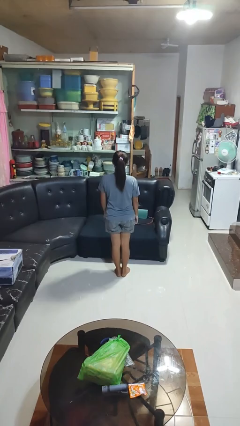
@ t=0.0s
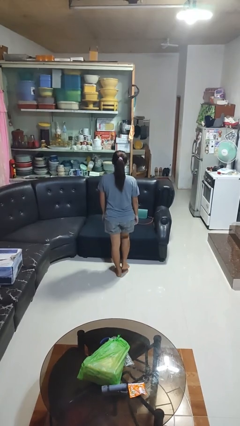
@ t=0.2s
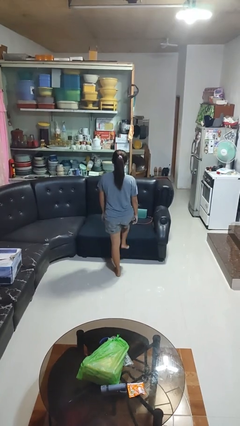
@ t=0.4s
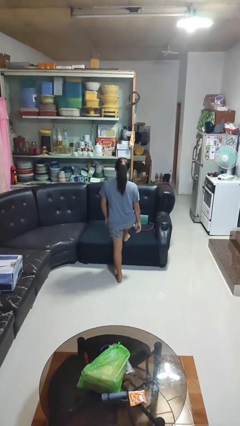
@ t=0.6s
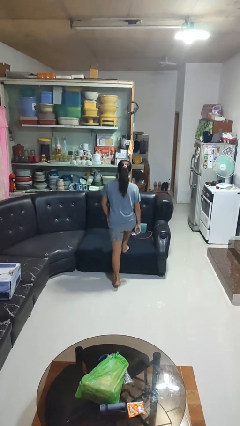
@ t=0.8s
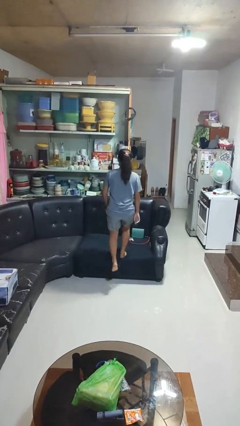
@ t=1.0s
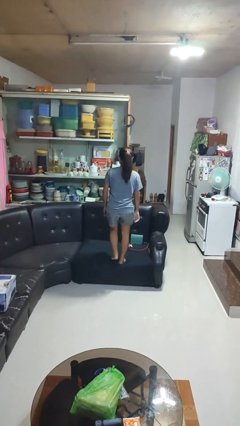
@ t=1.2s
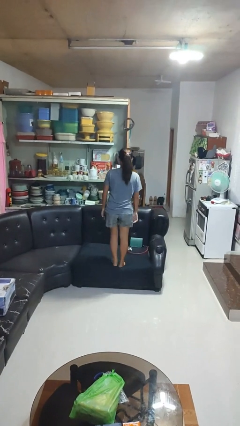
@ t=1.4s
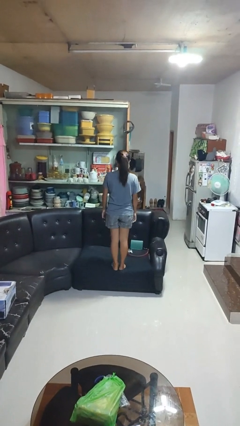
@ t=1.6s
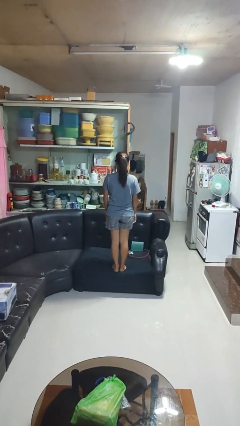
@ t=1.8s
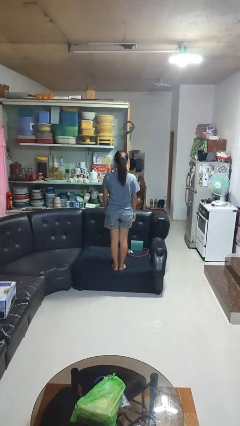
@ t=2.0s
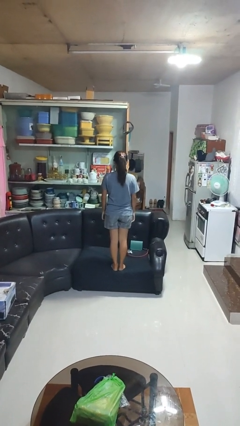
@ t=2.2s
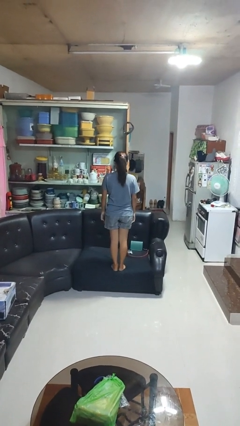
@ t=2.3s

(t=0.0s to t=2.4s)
person climbs on couch

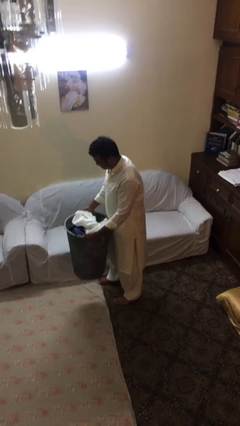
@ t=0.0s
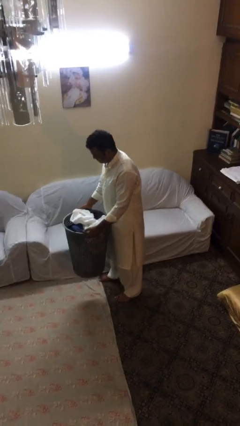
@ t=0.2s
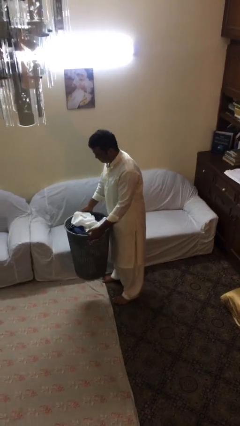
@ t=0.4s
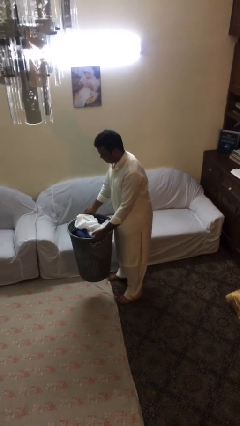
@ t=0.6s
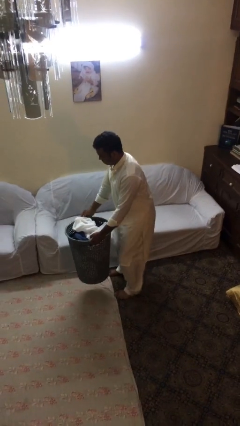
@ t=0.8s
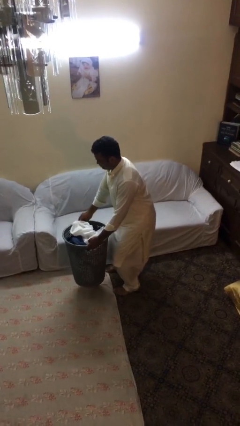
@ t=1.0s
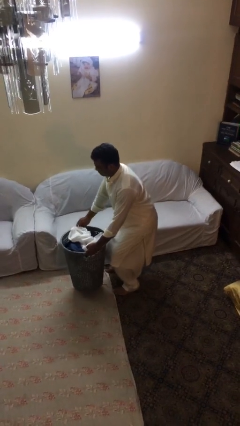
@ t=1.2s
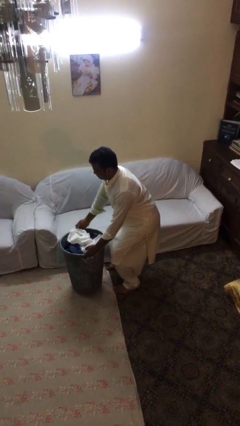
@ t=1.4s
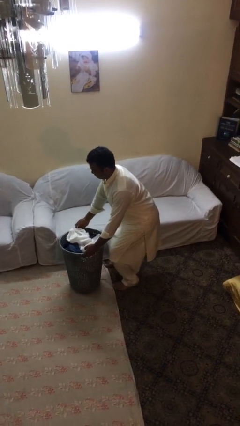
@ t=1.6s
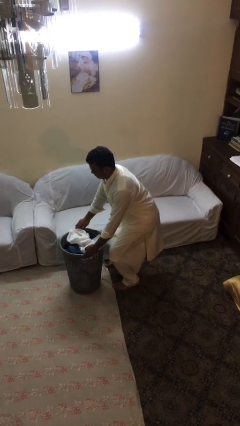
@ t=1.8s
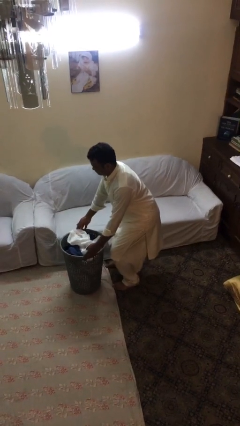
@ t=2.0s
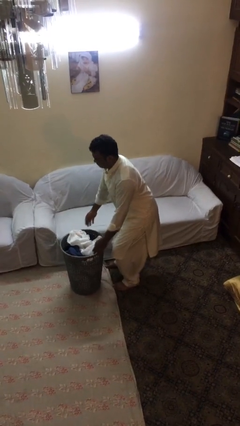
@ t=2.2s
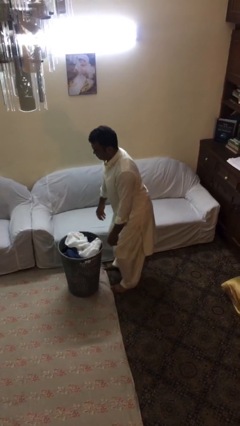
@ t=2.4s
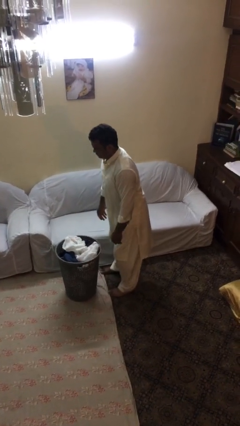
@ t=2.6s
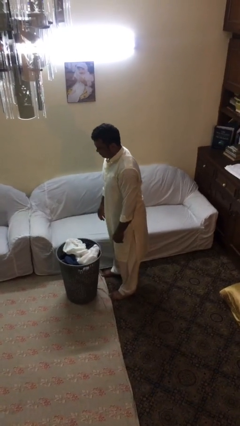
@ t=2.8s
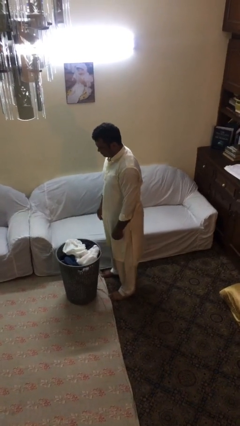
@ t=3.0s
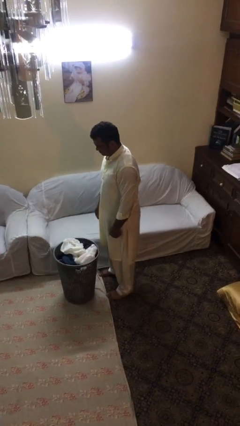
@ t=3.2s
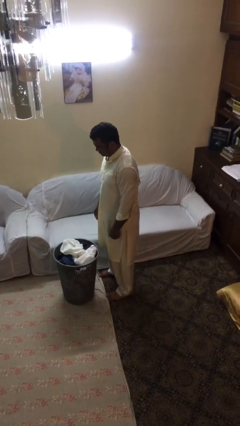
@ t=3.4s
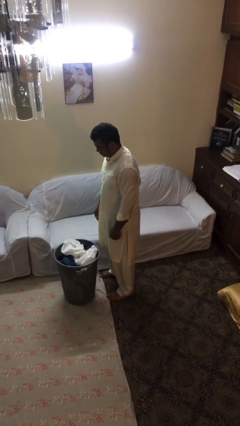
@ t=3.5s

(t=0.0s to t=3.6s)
person puts down object on floor

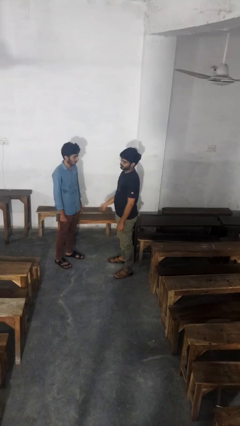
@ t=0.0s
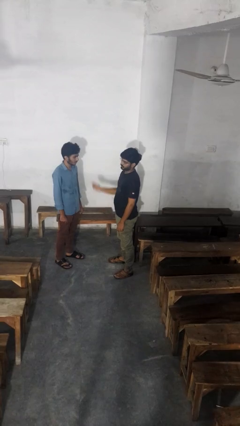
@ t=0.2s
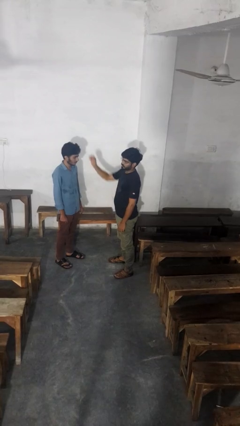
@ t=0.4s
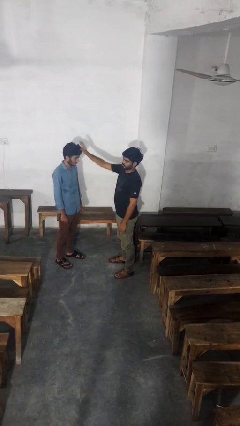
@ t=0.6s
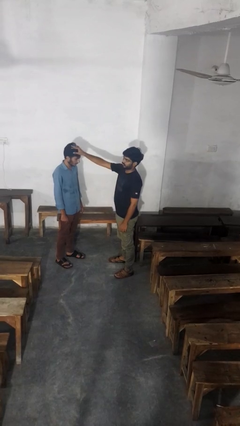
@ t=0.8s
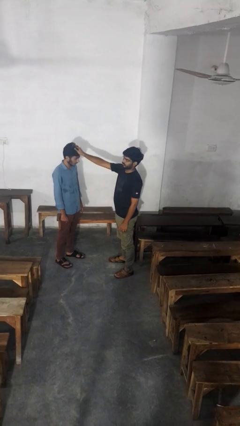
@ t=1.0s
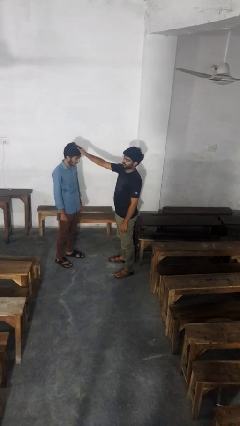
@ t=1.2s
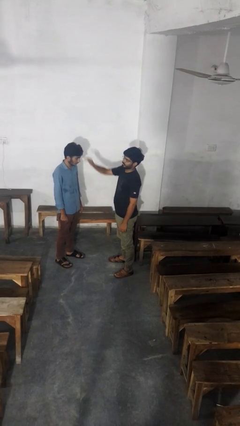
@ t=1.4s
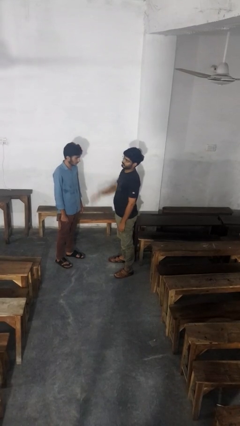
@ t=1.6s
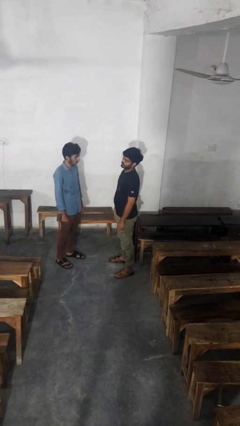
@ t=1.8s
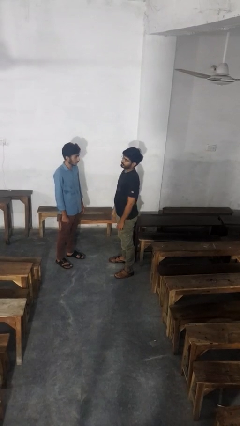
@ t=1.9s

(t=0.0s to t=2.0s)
person grabs person by hair

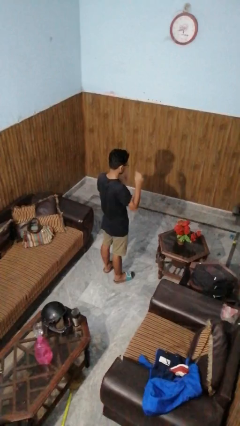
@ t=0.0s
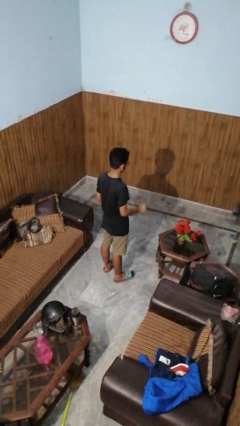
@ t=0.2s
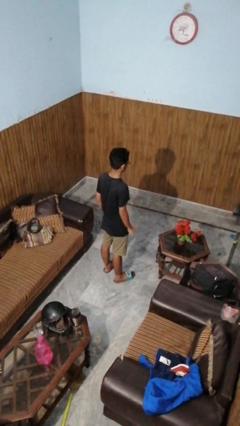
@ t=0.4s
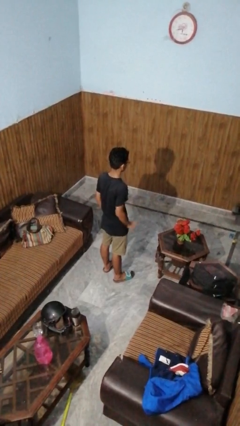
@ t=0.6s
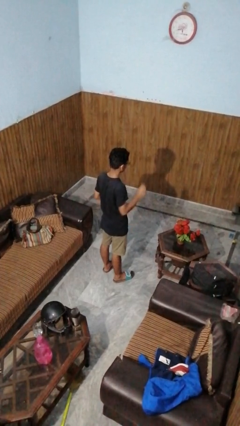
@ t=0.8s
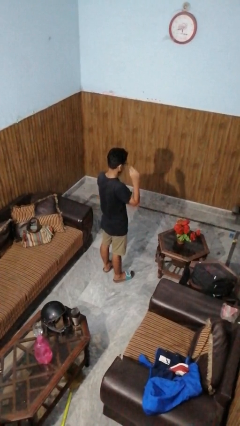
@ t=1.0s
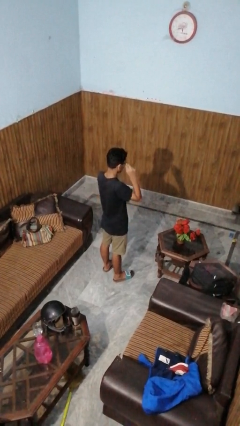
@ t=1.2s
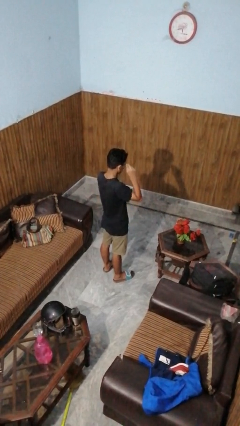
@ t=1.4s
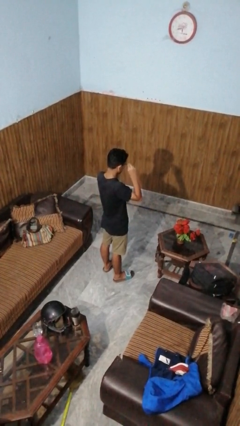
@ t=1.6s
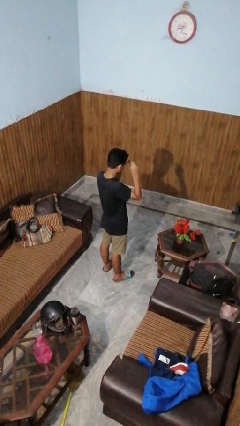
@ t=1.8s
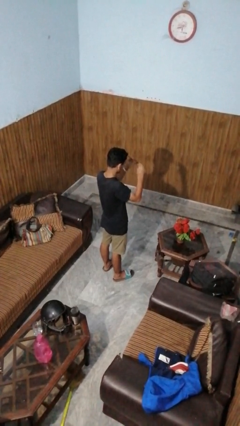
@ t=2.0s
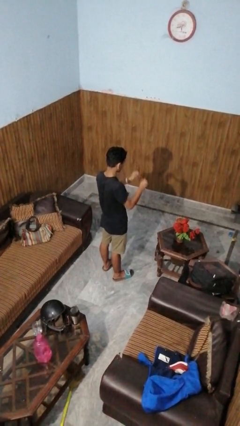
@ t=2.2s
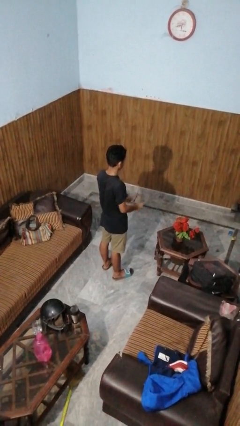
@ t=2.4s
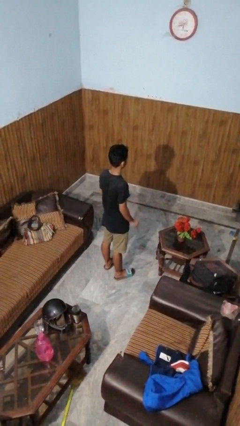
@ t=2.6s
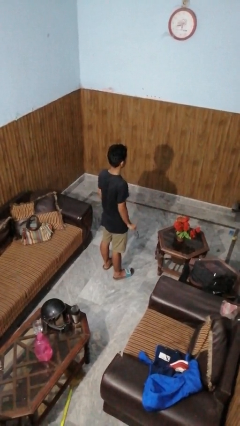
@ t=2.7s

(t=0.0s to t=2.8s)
person takes off glasses

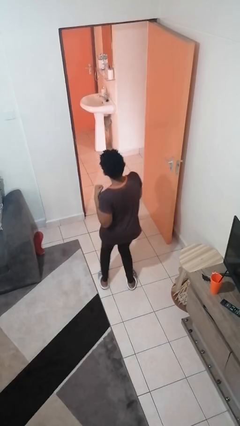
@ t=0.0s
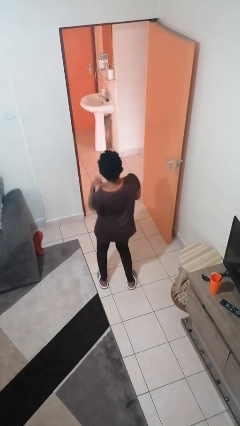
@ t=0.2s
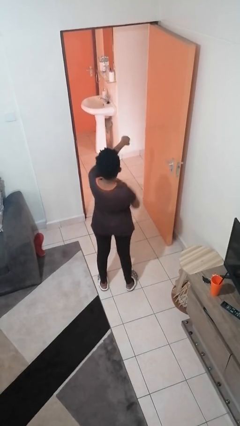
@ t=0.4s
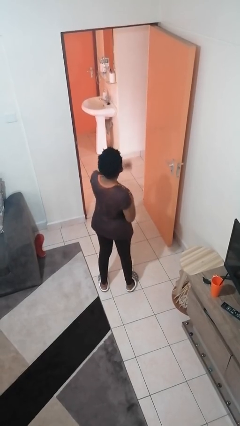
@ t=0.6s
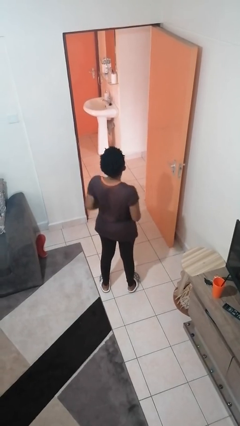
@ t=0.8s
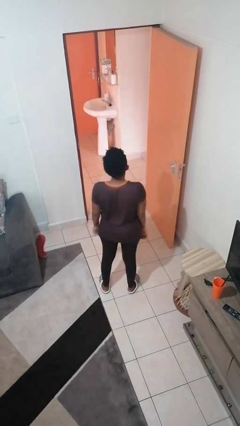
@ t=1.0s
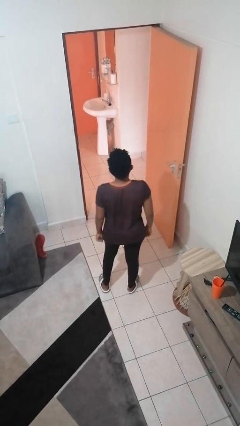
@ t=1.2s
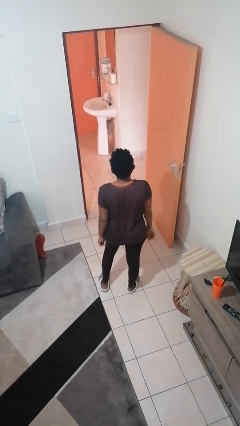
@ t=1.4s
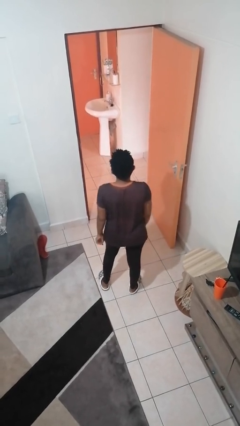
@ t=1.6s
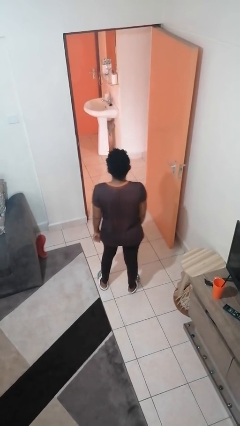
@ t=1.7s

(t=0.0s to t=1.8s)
person punches

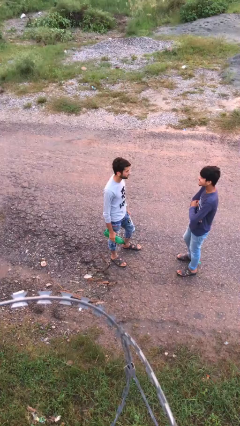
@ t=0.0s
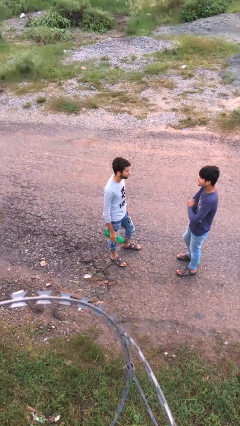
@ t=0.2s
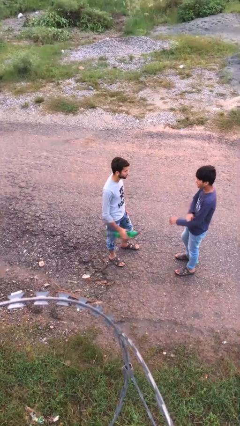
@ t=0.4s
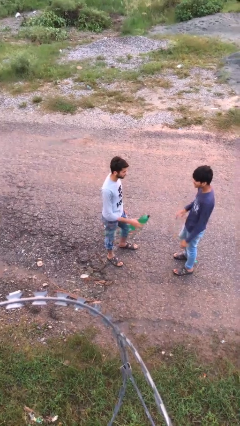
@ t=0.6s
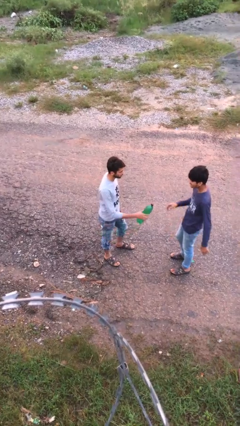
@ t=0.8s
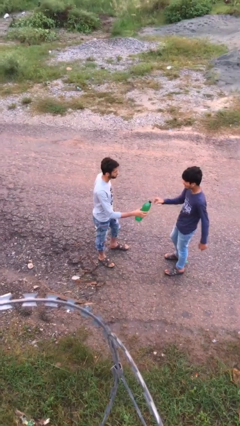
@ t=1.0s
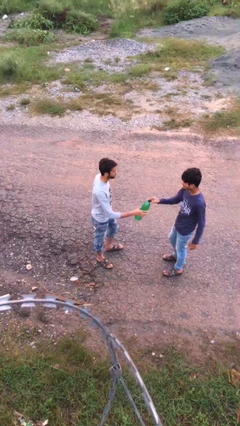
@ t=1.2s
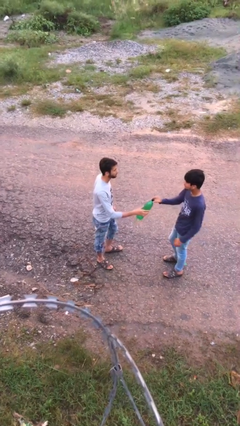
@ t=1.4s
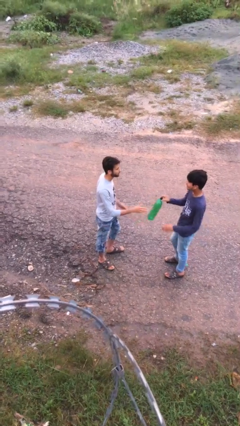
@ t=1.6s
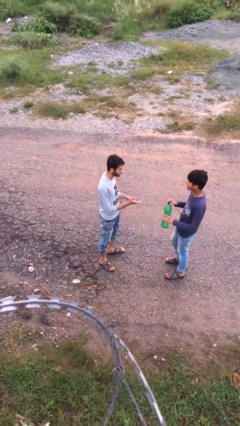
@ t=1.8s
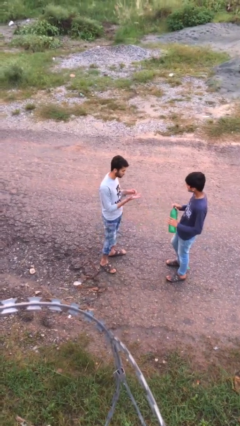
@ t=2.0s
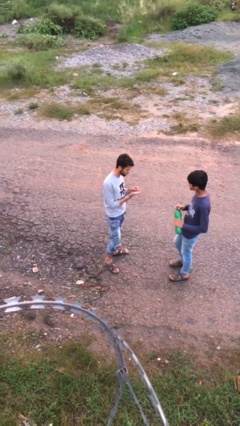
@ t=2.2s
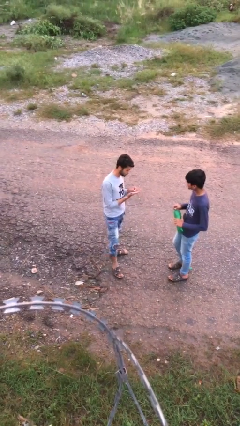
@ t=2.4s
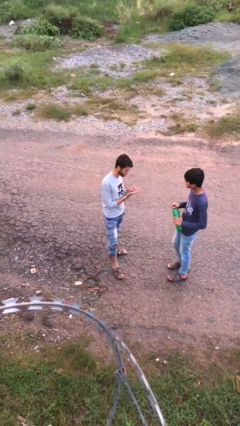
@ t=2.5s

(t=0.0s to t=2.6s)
person transfers object to person

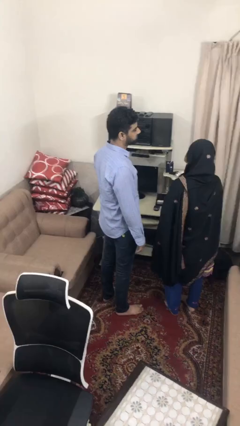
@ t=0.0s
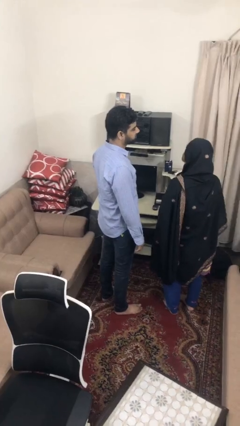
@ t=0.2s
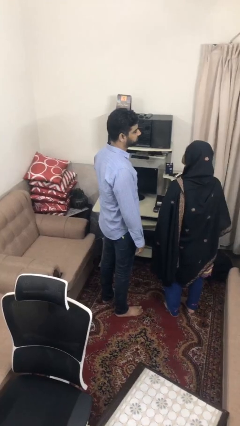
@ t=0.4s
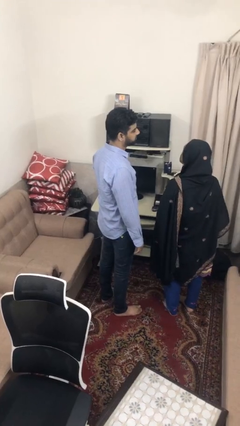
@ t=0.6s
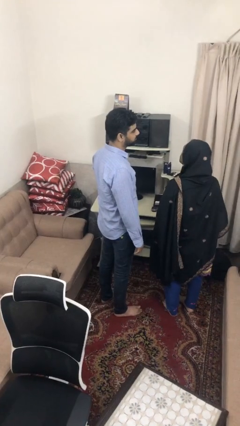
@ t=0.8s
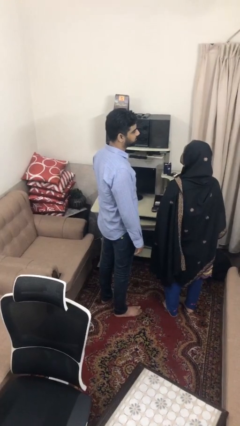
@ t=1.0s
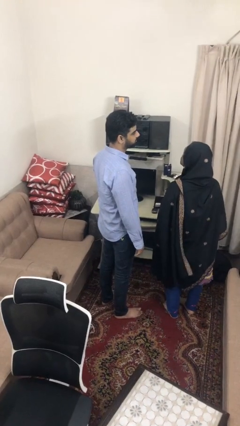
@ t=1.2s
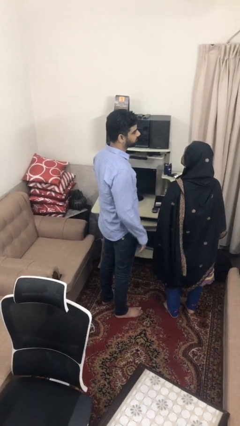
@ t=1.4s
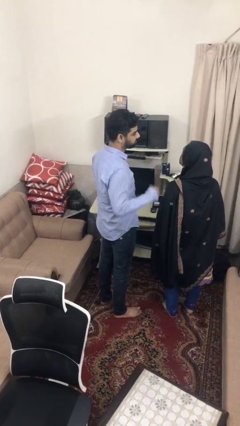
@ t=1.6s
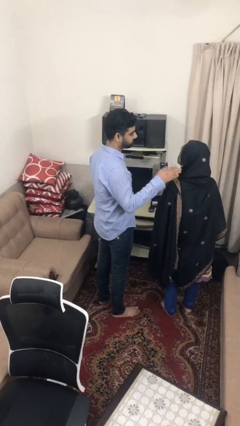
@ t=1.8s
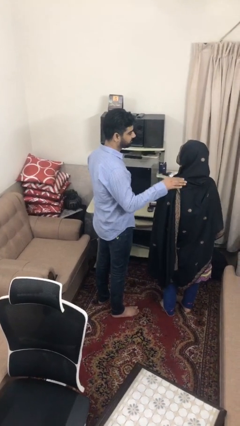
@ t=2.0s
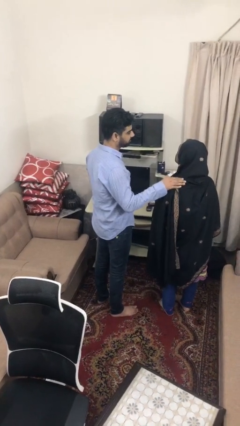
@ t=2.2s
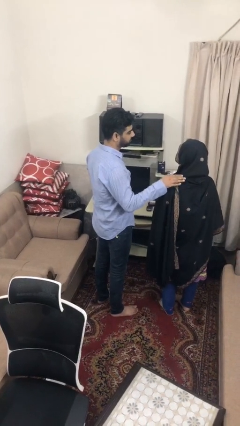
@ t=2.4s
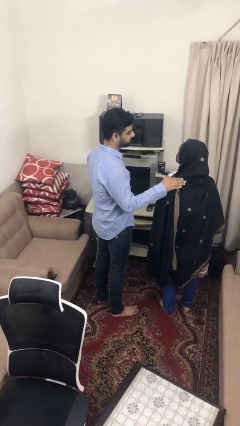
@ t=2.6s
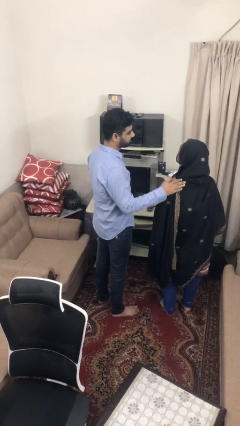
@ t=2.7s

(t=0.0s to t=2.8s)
person pounds shoulders of person
